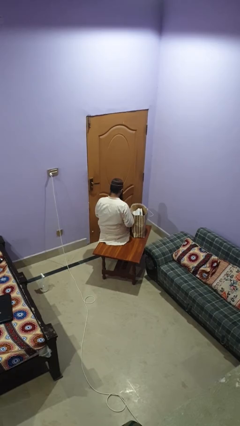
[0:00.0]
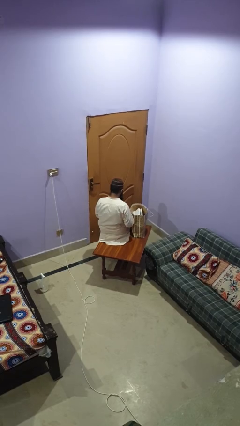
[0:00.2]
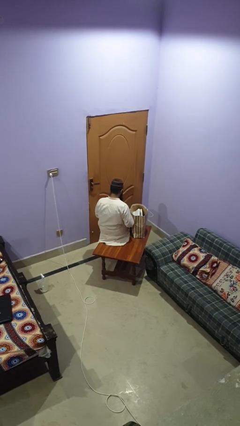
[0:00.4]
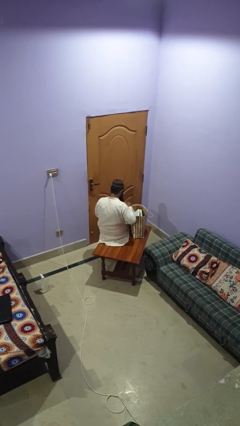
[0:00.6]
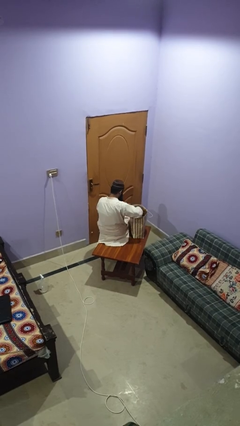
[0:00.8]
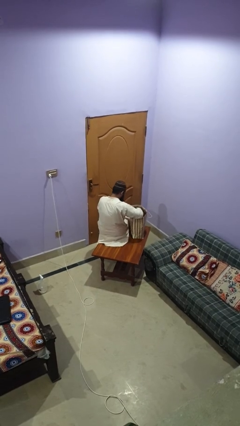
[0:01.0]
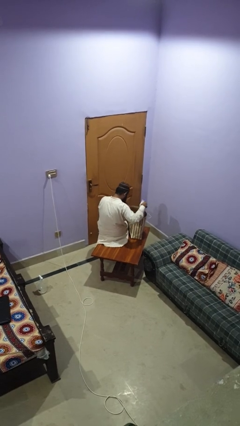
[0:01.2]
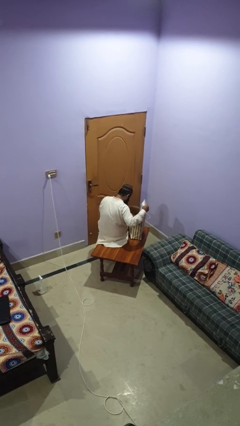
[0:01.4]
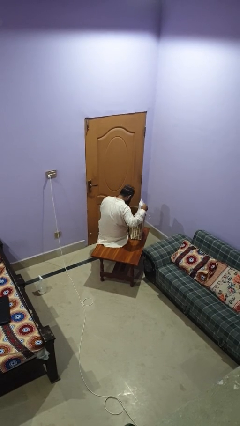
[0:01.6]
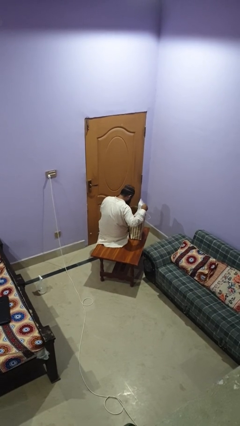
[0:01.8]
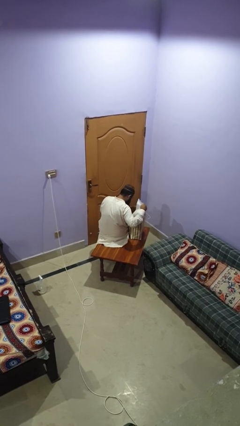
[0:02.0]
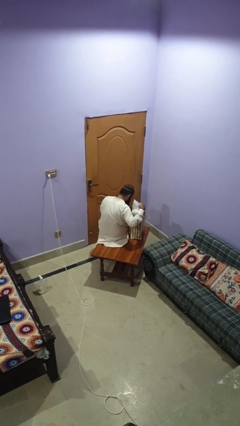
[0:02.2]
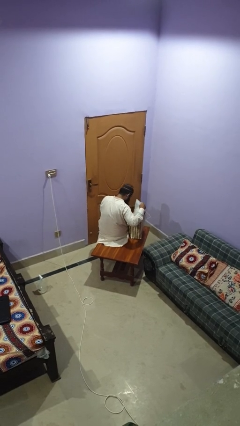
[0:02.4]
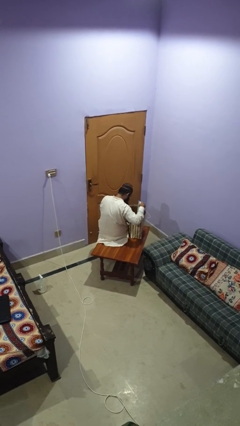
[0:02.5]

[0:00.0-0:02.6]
person searches in bag

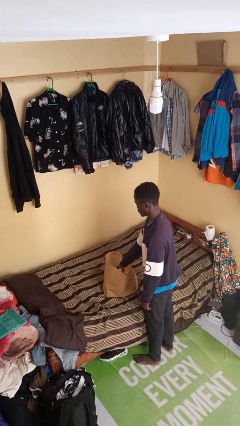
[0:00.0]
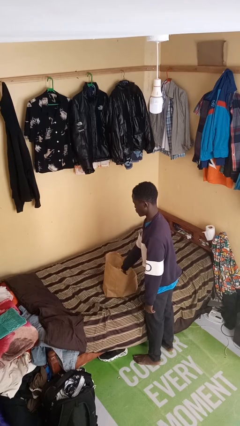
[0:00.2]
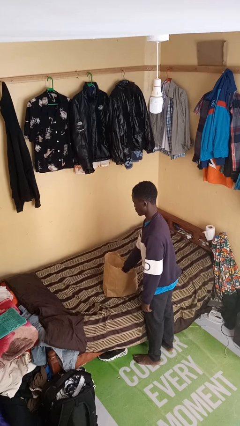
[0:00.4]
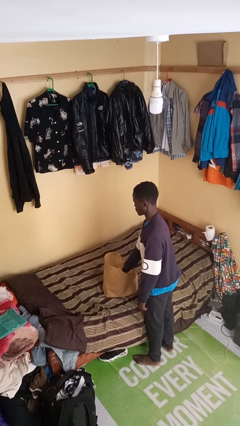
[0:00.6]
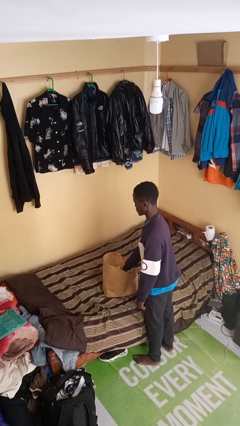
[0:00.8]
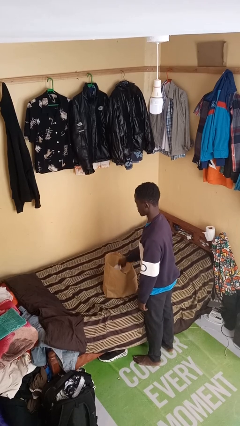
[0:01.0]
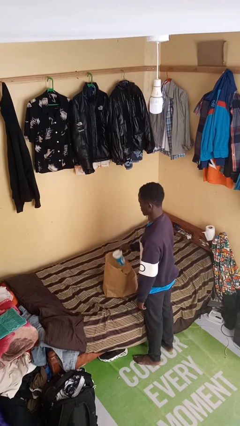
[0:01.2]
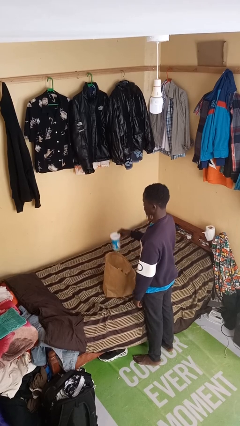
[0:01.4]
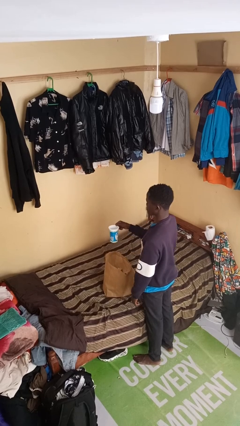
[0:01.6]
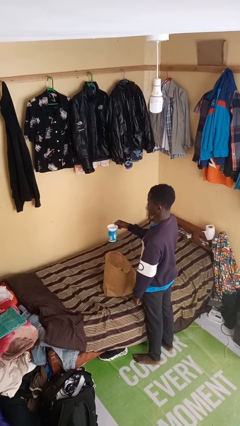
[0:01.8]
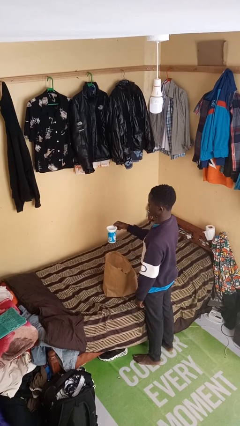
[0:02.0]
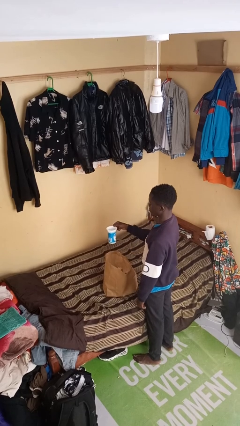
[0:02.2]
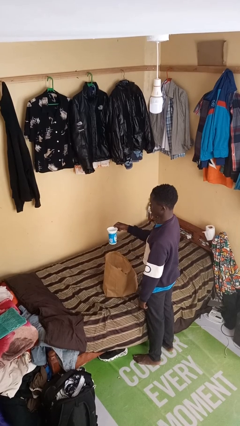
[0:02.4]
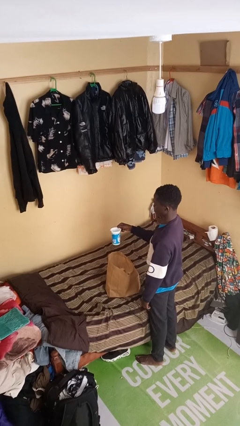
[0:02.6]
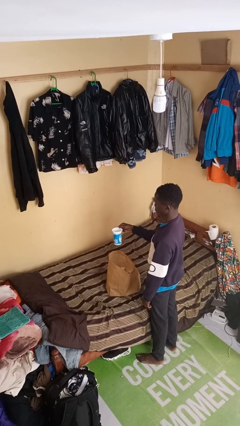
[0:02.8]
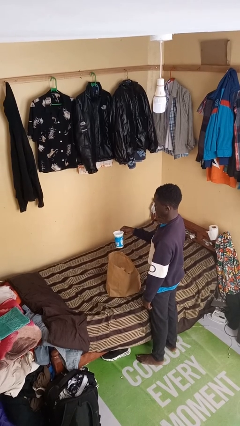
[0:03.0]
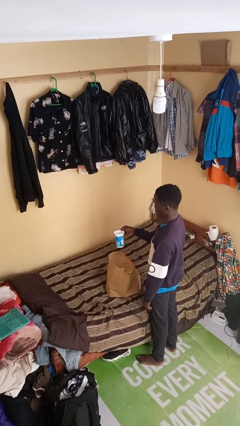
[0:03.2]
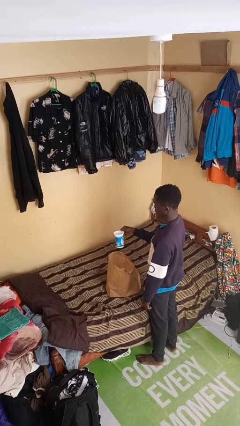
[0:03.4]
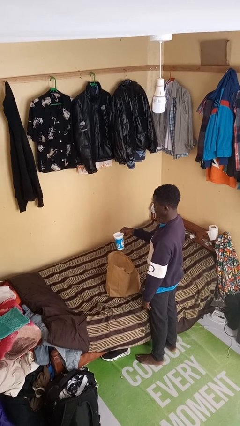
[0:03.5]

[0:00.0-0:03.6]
person takes object from bag

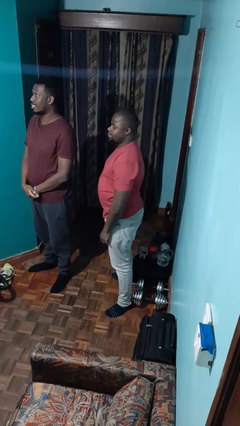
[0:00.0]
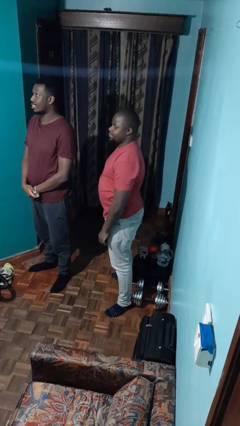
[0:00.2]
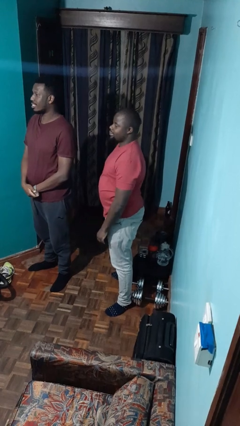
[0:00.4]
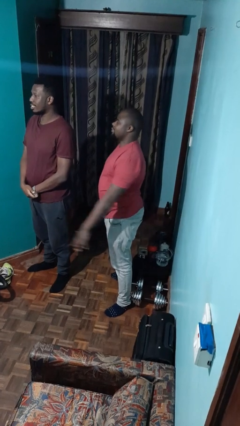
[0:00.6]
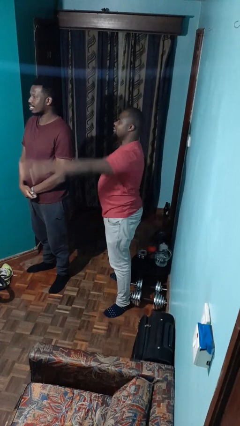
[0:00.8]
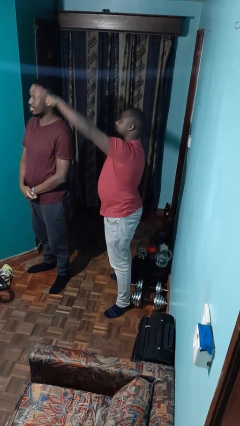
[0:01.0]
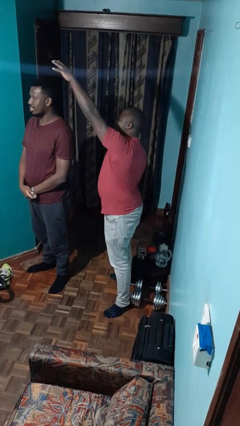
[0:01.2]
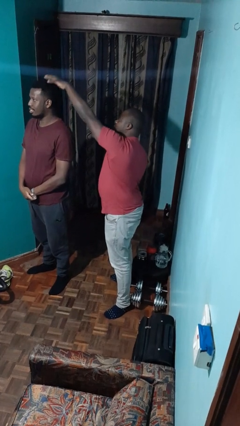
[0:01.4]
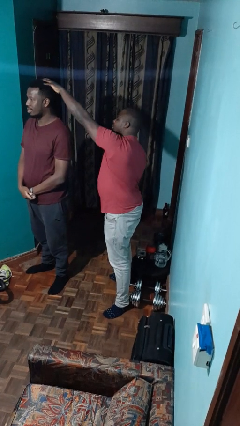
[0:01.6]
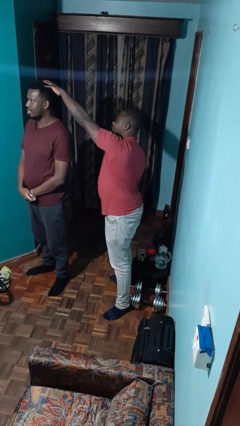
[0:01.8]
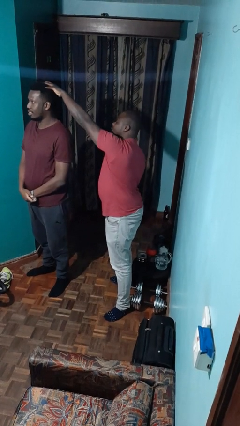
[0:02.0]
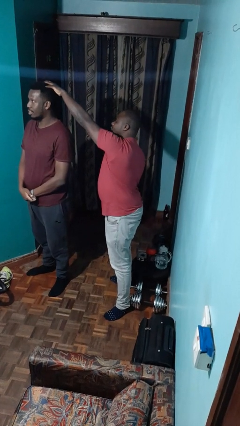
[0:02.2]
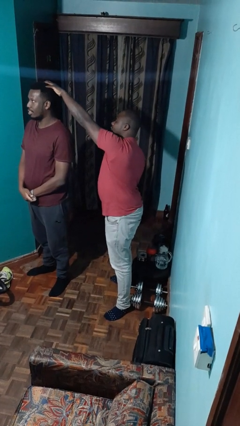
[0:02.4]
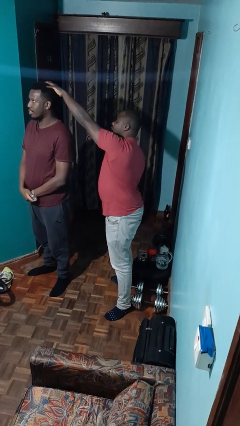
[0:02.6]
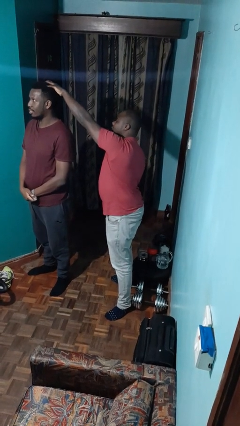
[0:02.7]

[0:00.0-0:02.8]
person grabs person by hair

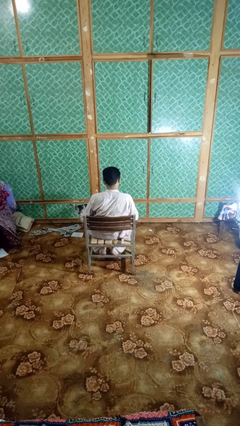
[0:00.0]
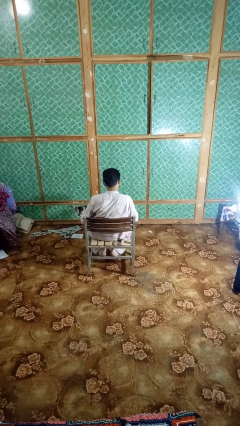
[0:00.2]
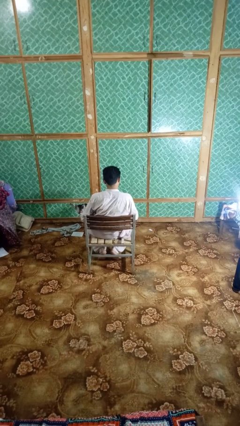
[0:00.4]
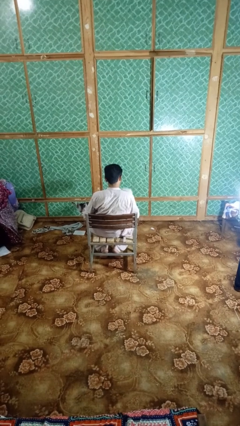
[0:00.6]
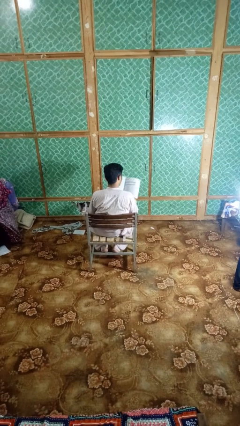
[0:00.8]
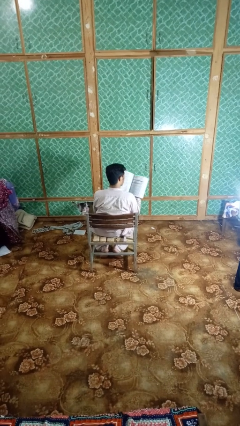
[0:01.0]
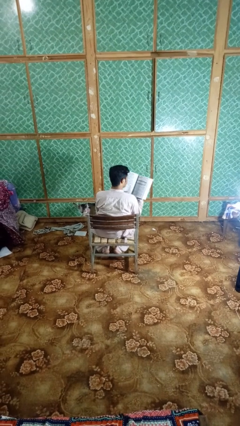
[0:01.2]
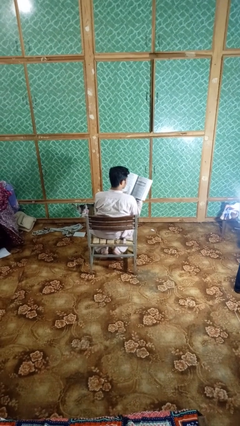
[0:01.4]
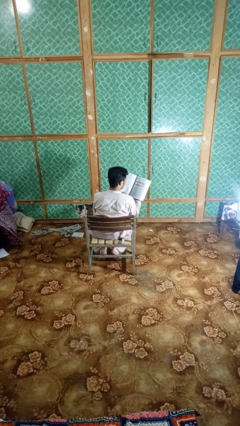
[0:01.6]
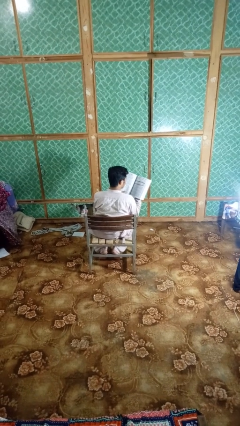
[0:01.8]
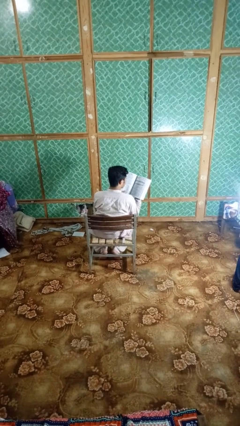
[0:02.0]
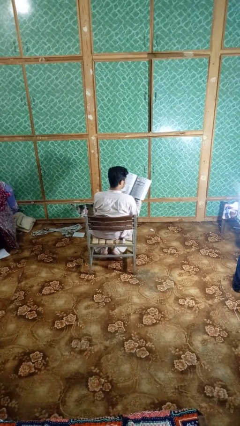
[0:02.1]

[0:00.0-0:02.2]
person reads book

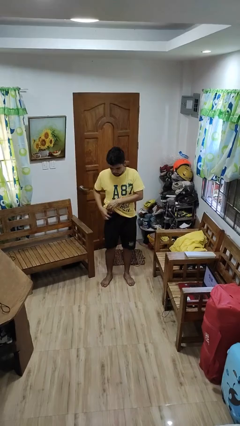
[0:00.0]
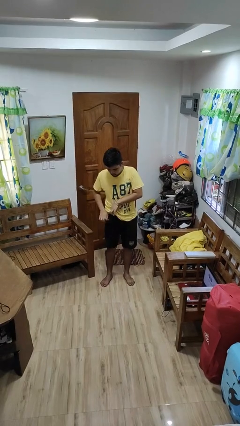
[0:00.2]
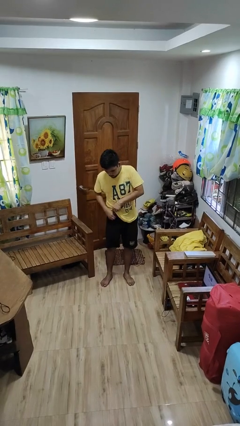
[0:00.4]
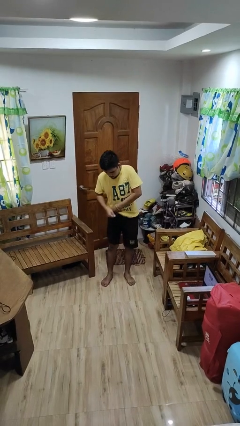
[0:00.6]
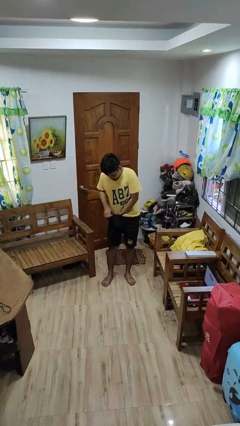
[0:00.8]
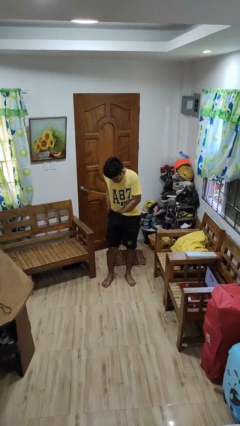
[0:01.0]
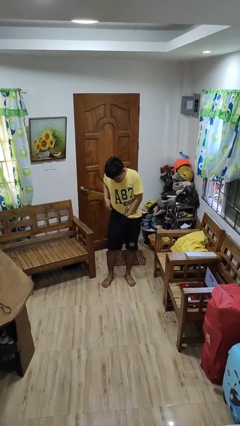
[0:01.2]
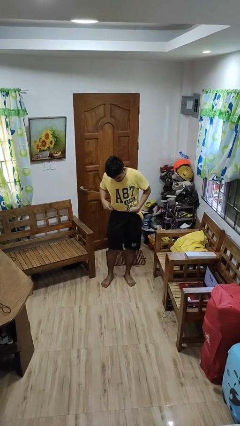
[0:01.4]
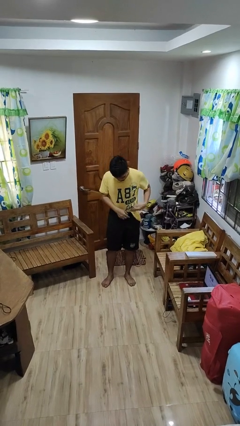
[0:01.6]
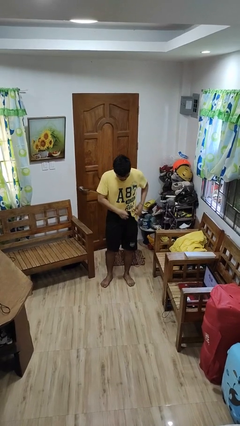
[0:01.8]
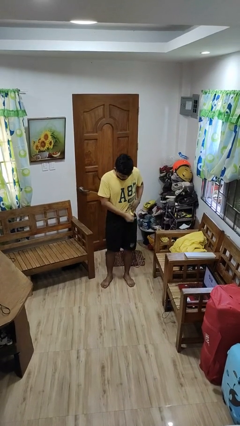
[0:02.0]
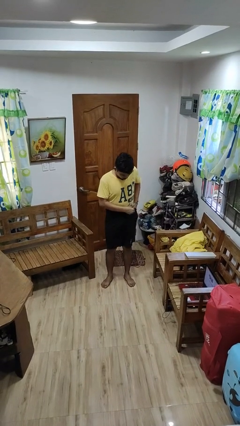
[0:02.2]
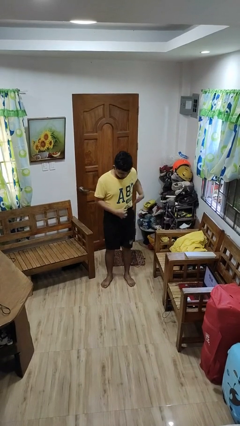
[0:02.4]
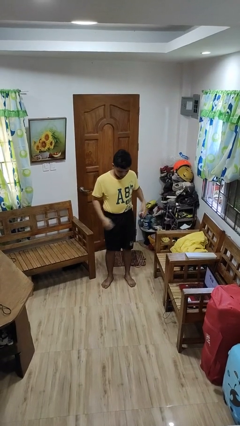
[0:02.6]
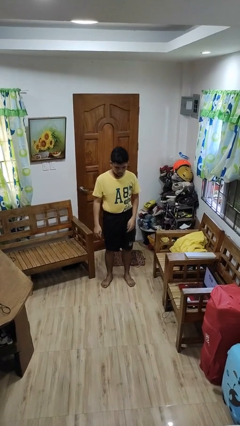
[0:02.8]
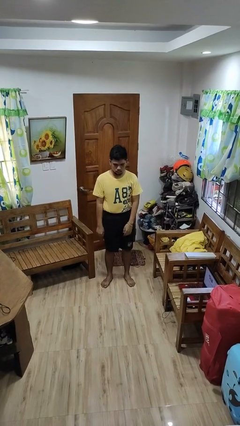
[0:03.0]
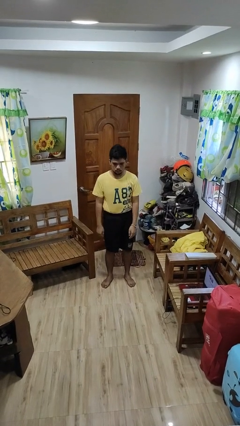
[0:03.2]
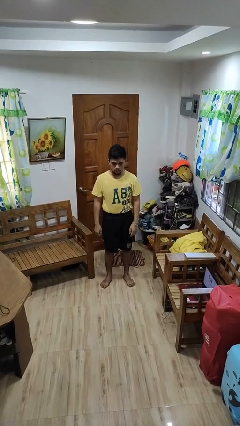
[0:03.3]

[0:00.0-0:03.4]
person tucks in shirt

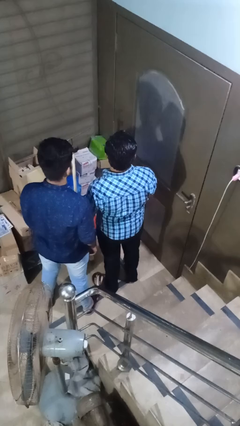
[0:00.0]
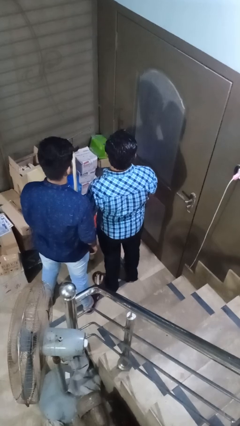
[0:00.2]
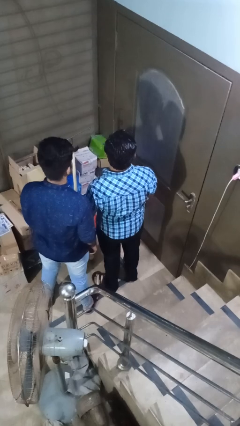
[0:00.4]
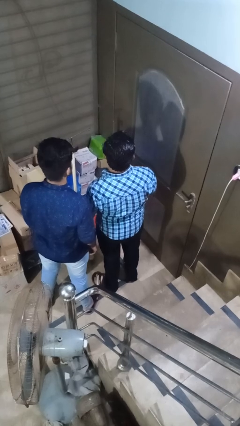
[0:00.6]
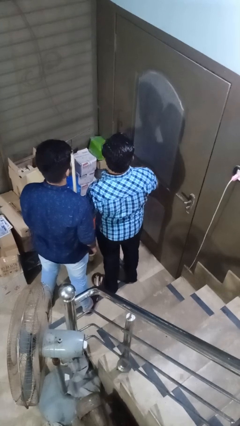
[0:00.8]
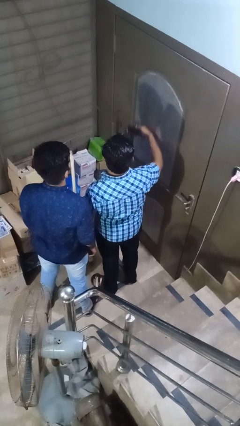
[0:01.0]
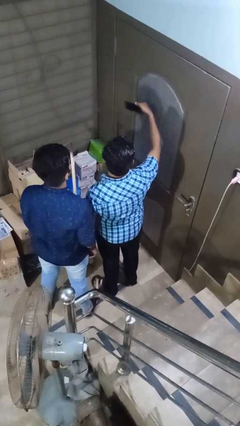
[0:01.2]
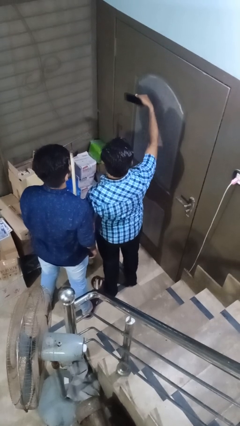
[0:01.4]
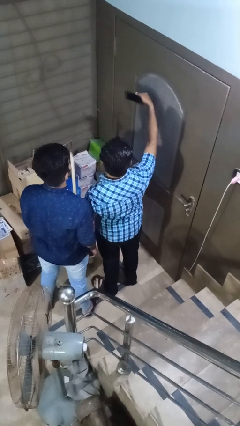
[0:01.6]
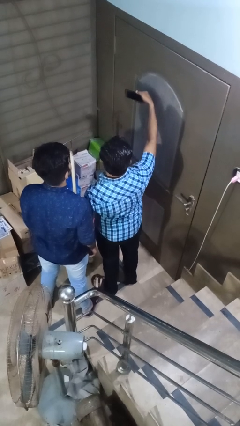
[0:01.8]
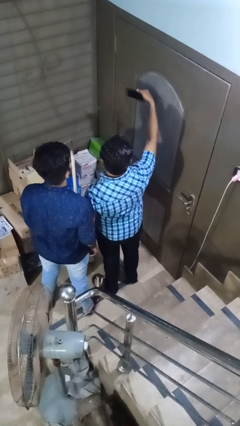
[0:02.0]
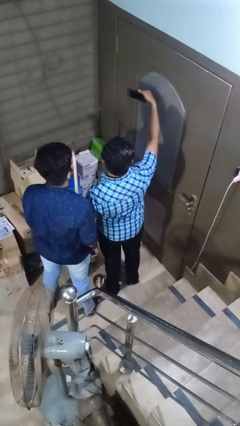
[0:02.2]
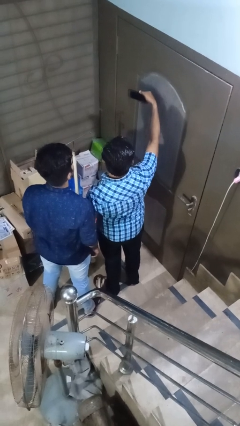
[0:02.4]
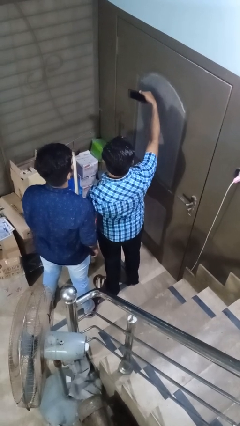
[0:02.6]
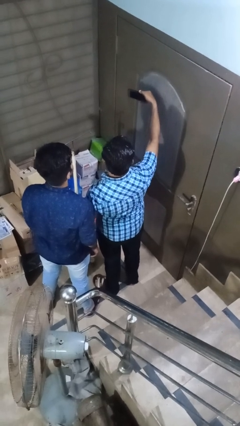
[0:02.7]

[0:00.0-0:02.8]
person takes selfie with person
